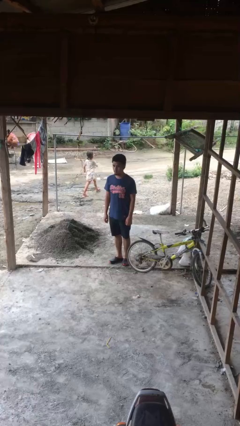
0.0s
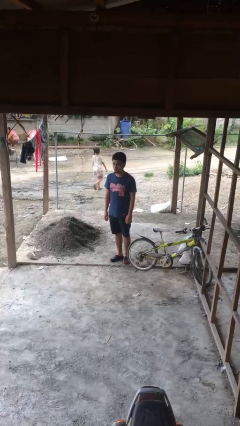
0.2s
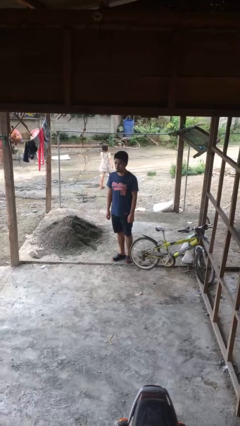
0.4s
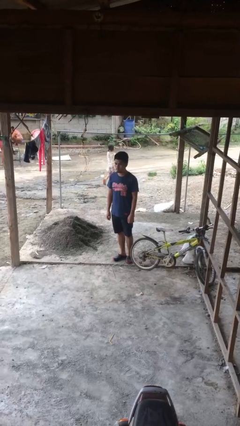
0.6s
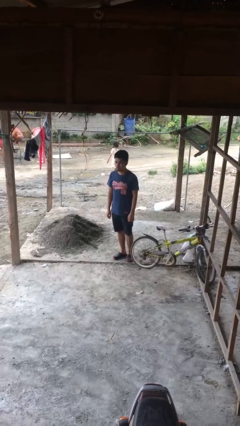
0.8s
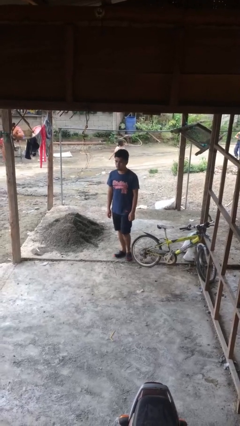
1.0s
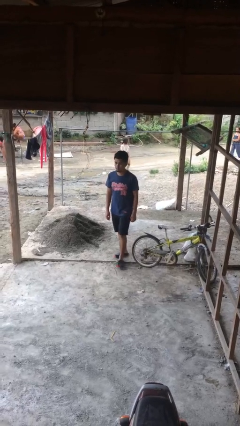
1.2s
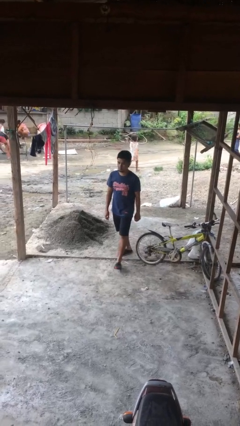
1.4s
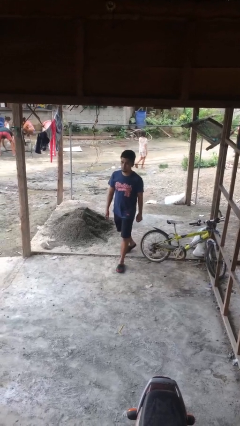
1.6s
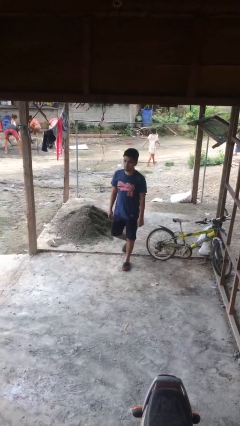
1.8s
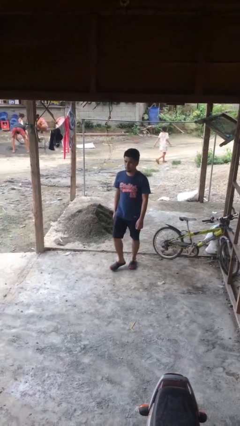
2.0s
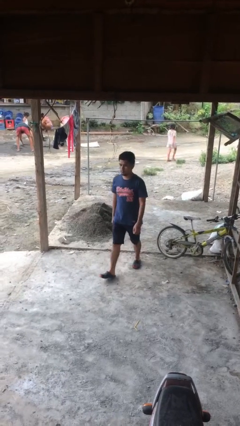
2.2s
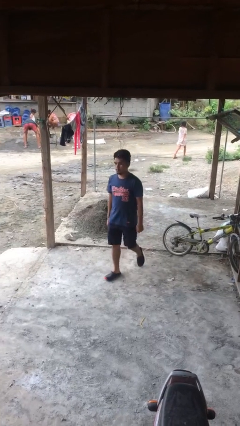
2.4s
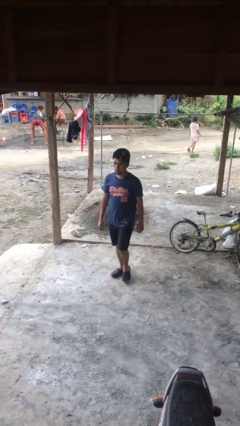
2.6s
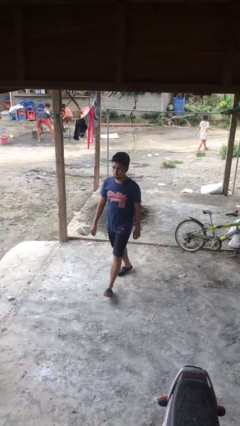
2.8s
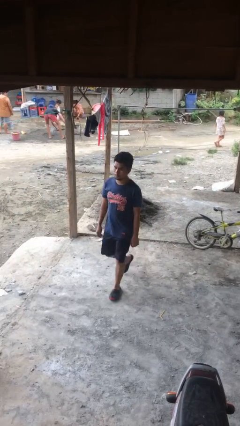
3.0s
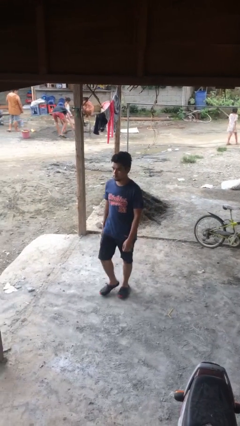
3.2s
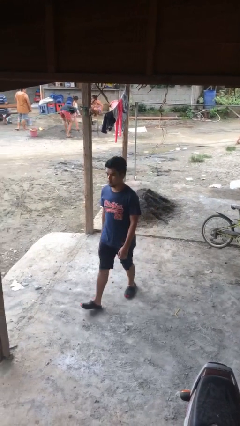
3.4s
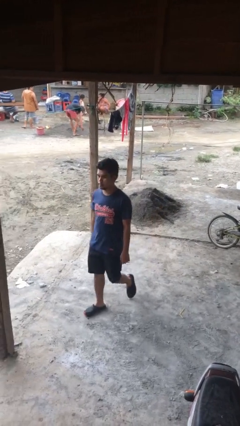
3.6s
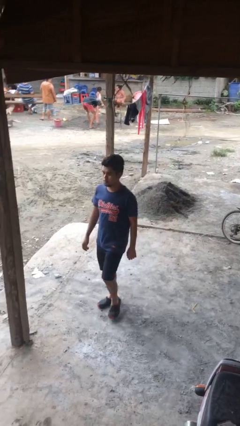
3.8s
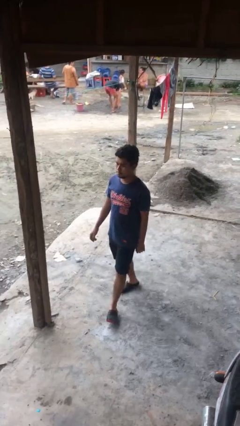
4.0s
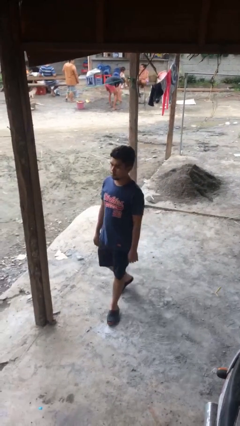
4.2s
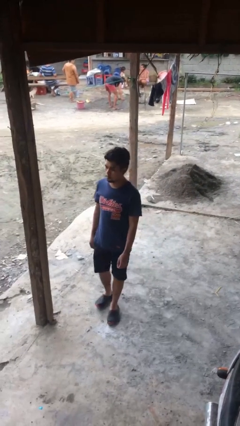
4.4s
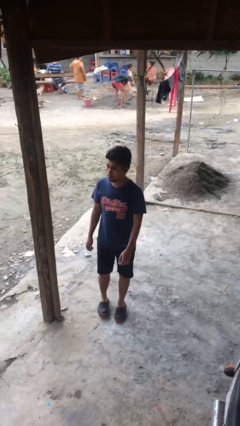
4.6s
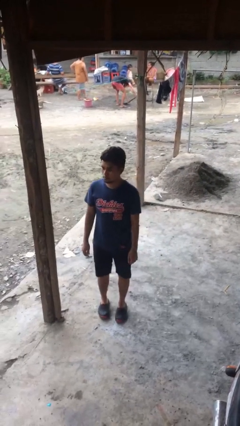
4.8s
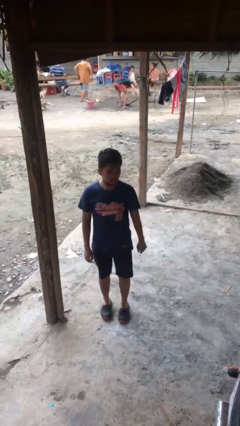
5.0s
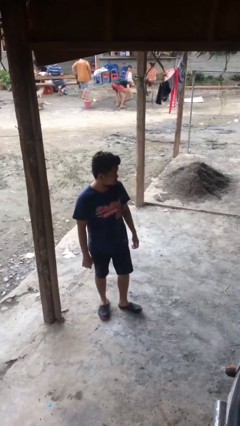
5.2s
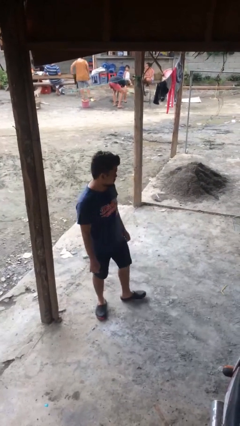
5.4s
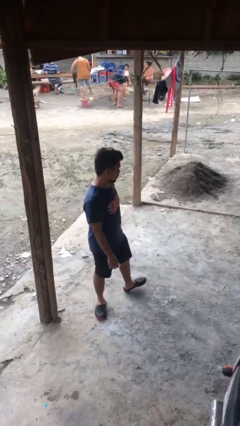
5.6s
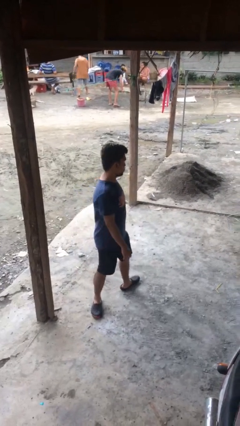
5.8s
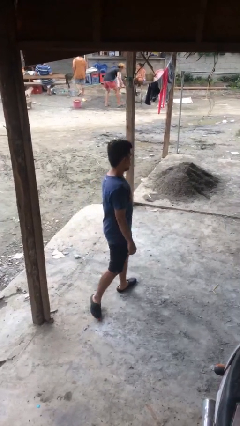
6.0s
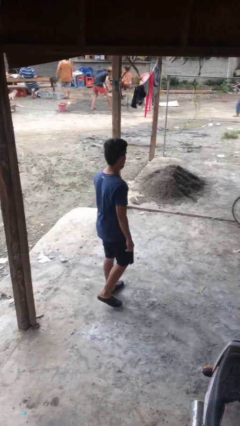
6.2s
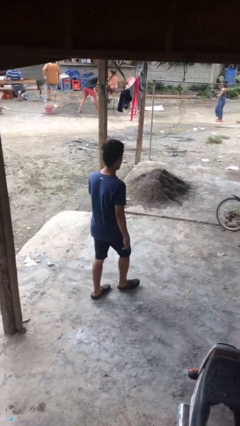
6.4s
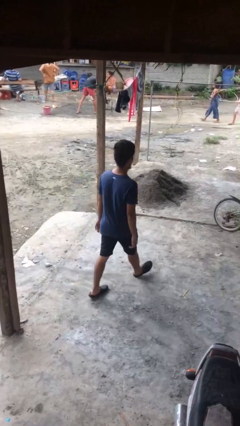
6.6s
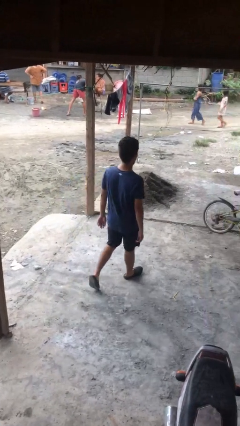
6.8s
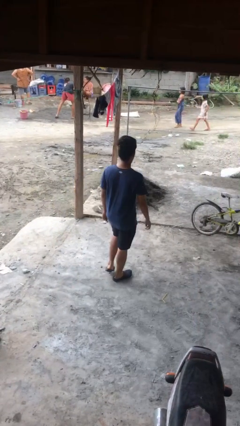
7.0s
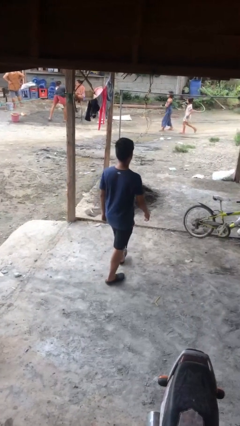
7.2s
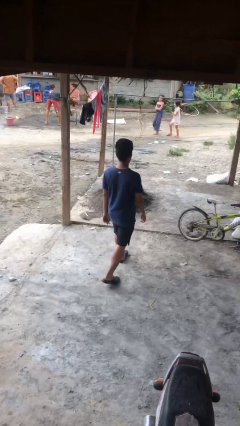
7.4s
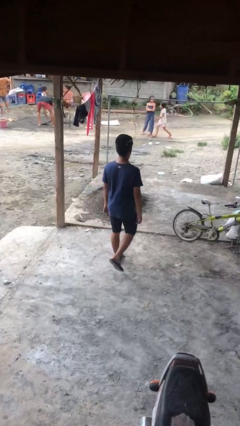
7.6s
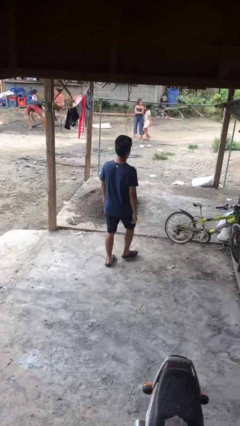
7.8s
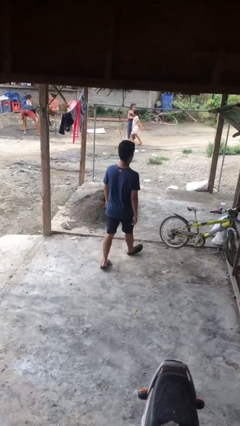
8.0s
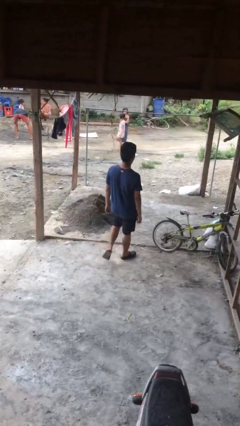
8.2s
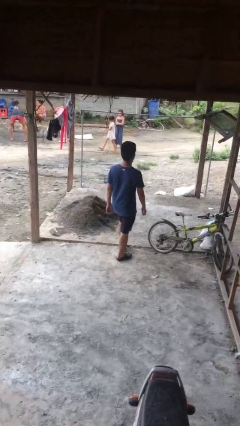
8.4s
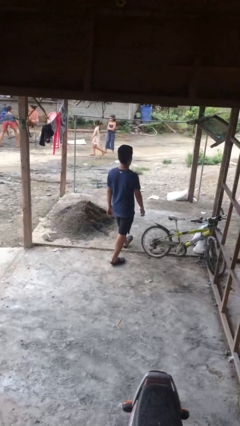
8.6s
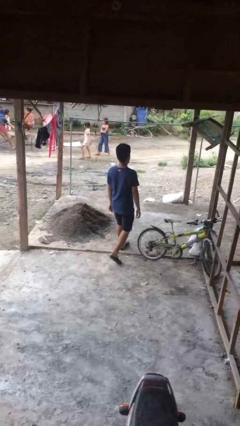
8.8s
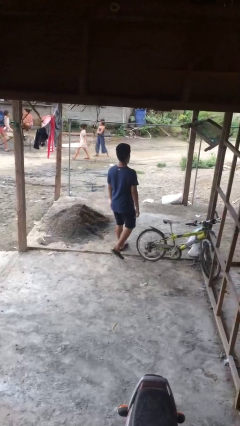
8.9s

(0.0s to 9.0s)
person walks

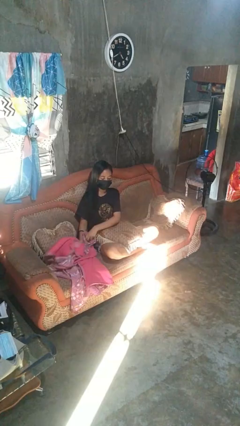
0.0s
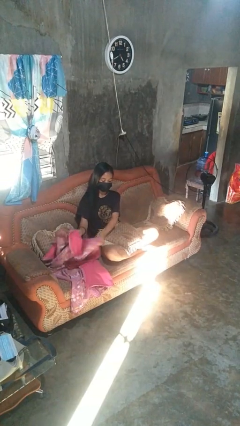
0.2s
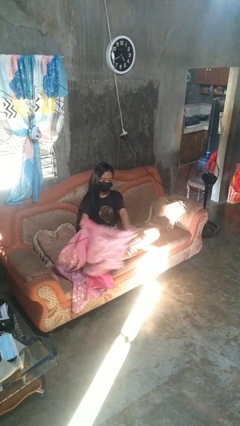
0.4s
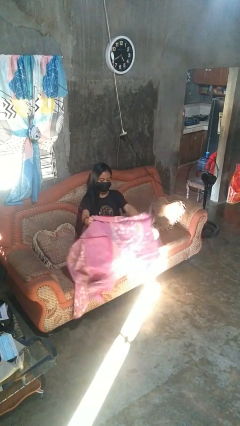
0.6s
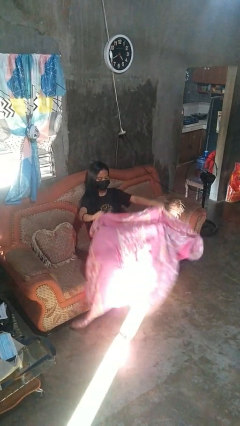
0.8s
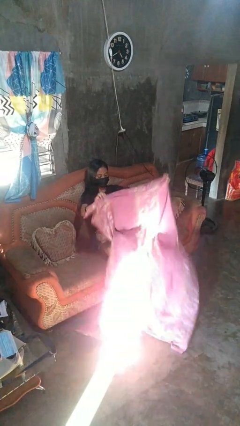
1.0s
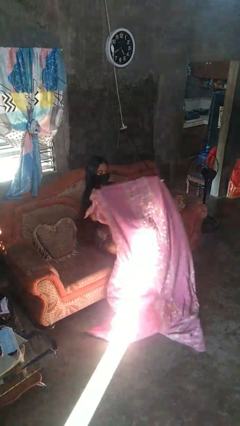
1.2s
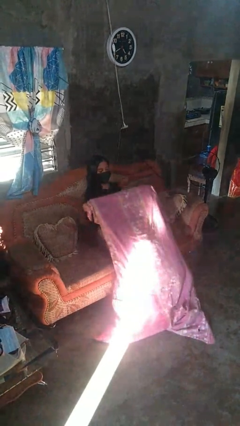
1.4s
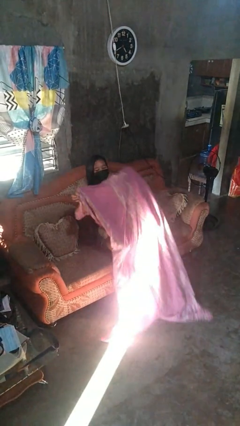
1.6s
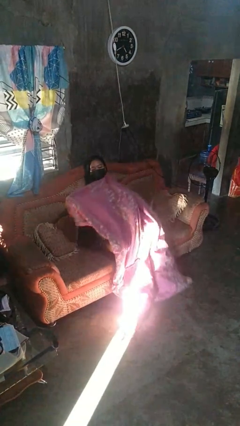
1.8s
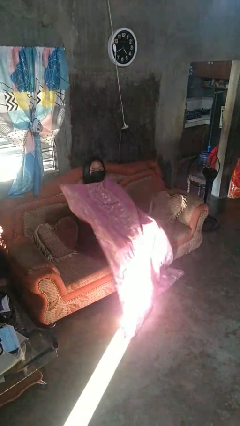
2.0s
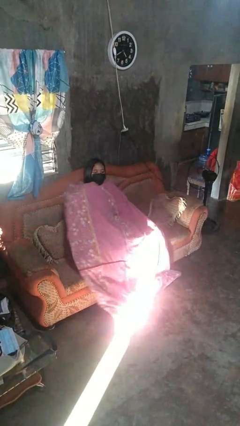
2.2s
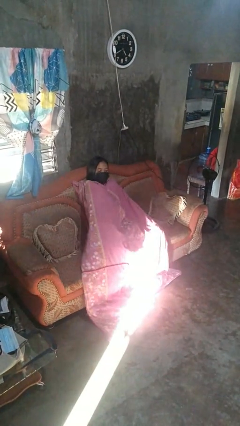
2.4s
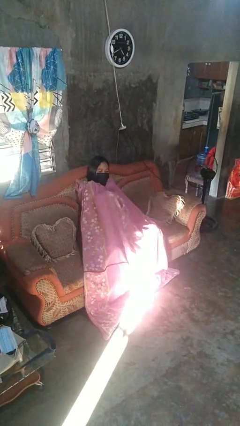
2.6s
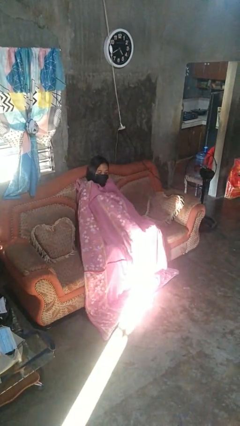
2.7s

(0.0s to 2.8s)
person covers with blanket

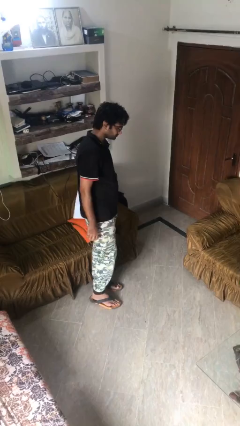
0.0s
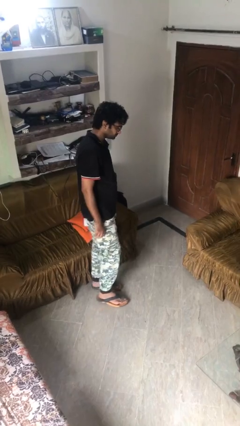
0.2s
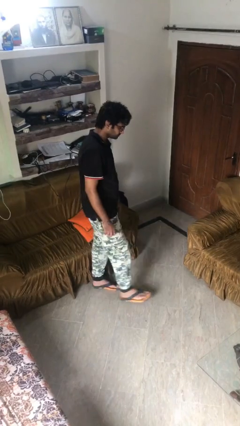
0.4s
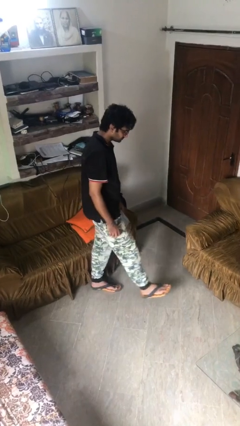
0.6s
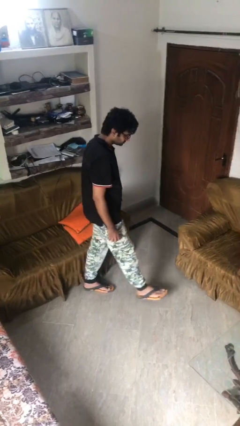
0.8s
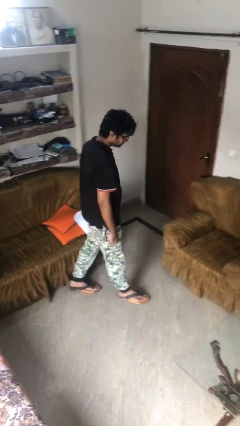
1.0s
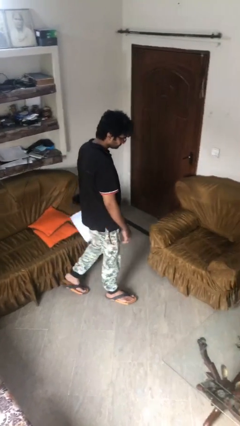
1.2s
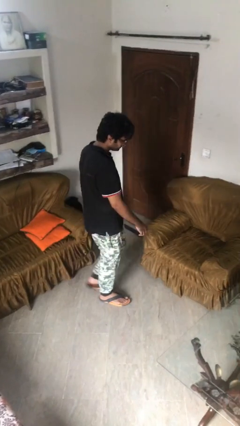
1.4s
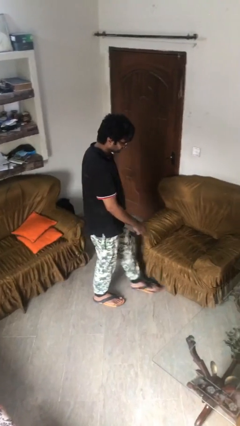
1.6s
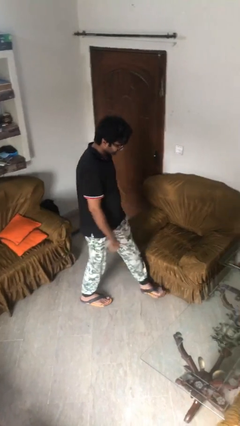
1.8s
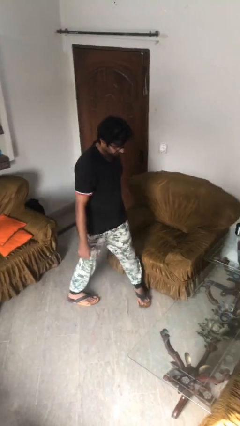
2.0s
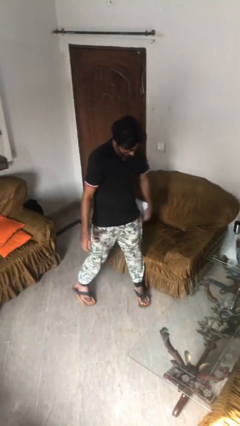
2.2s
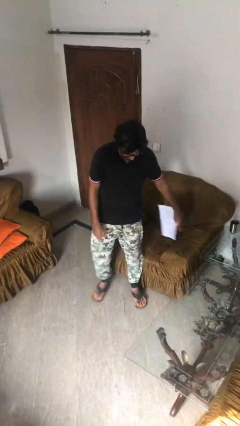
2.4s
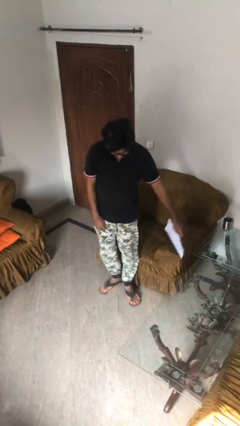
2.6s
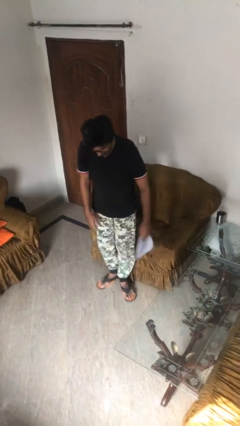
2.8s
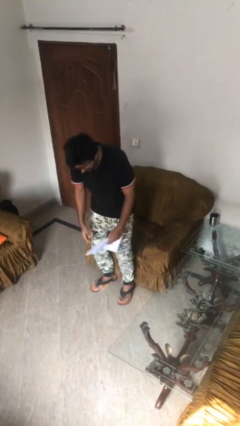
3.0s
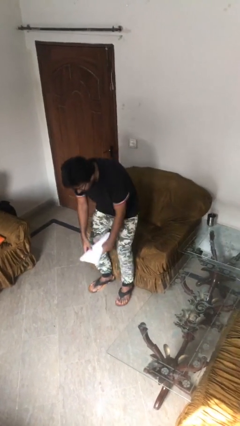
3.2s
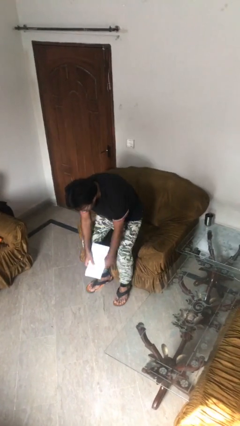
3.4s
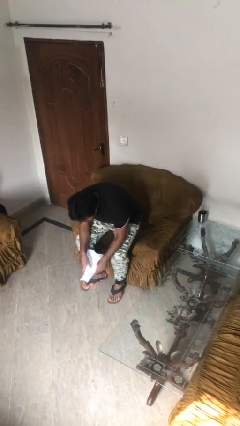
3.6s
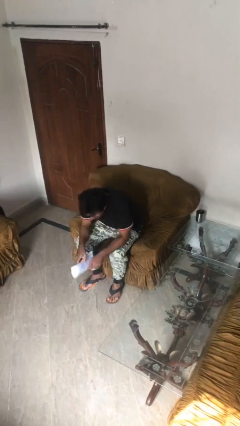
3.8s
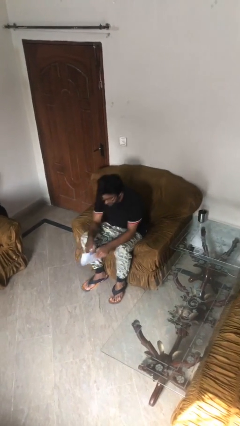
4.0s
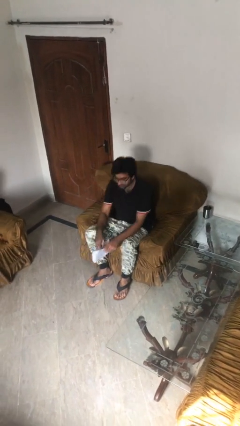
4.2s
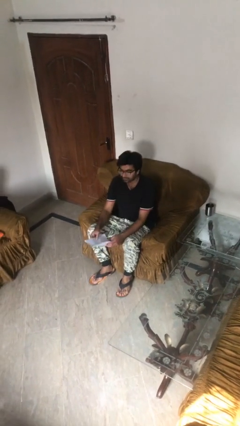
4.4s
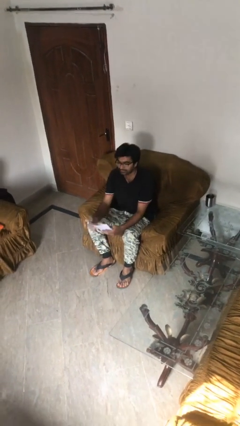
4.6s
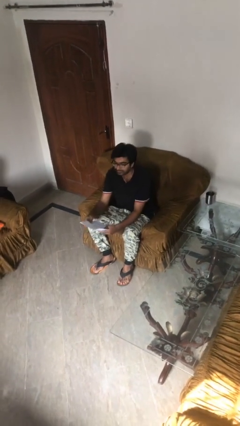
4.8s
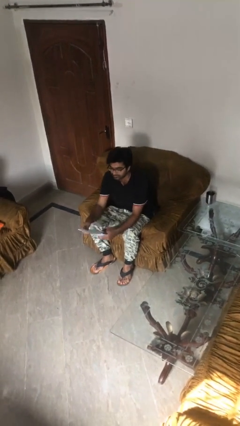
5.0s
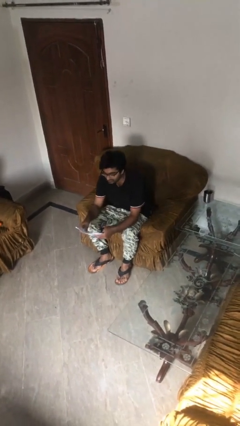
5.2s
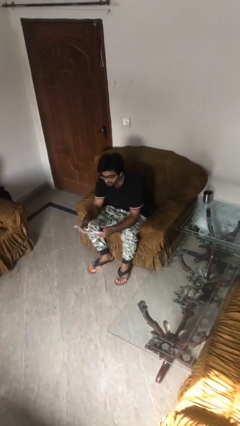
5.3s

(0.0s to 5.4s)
person sits down

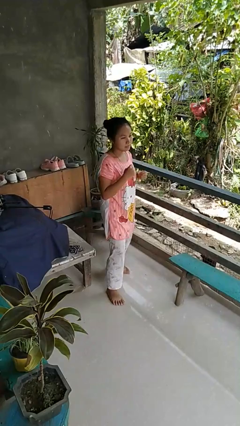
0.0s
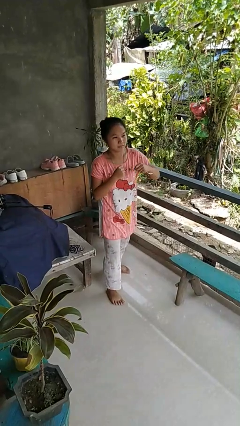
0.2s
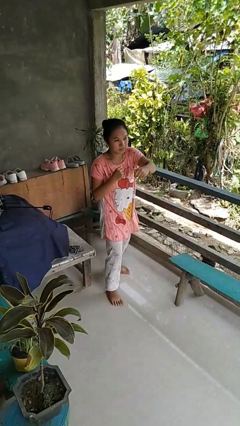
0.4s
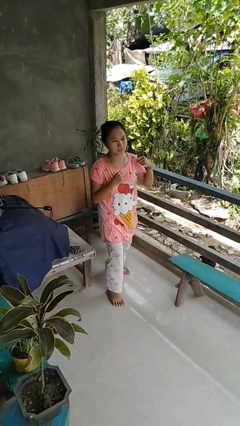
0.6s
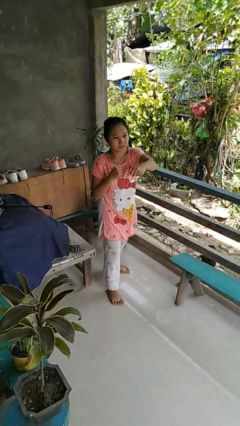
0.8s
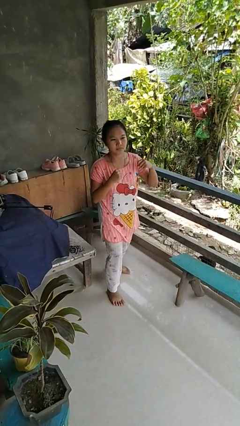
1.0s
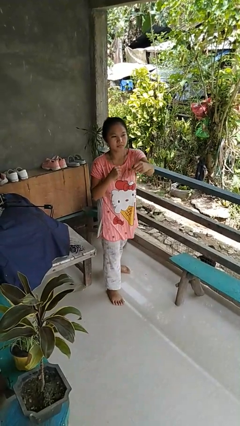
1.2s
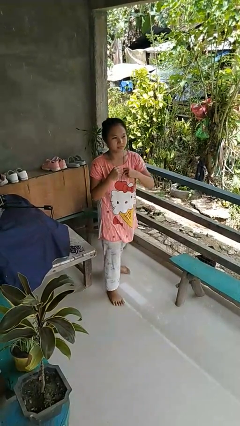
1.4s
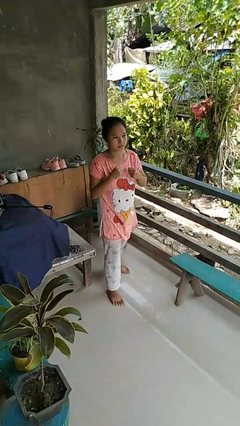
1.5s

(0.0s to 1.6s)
person punches
